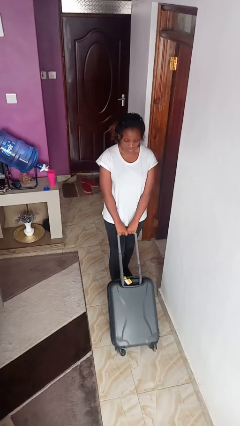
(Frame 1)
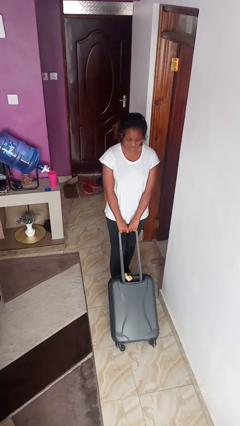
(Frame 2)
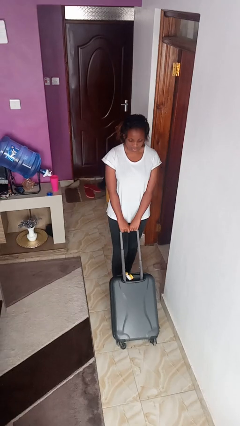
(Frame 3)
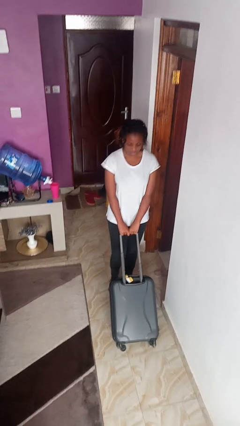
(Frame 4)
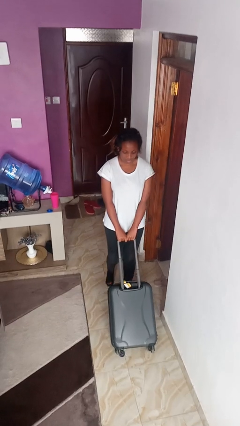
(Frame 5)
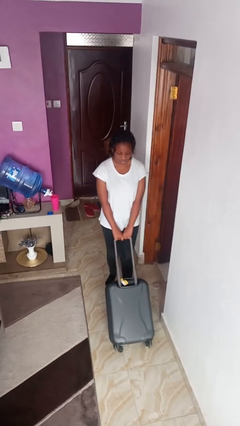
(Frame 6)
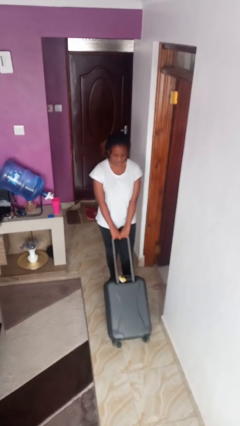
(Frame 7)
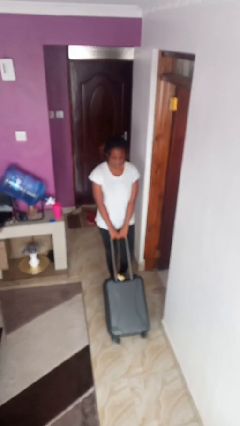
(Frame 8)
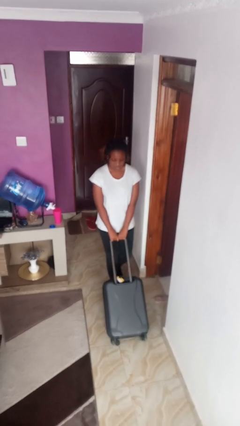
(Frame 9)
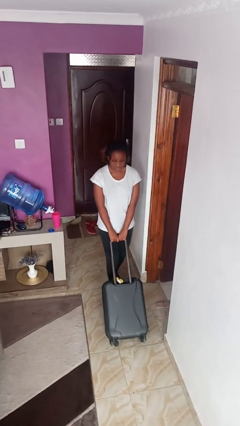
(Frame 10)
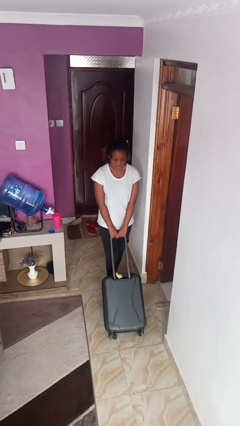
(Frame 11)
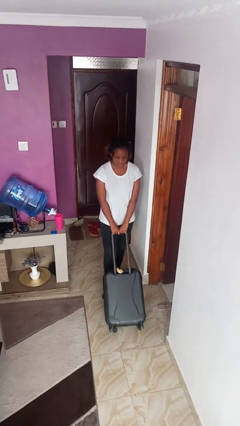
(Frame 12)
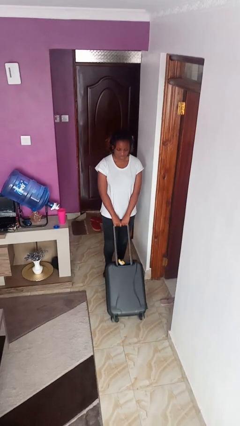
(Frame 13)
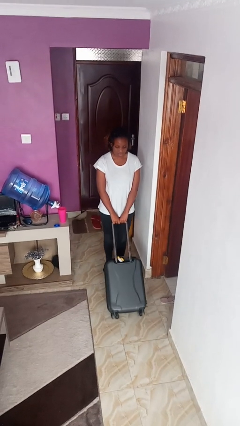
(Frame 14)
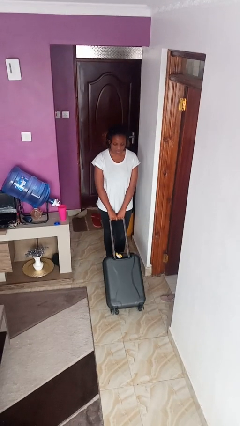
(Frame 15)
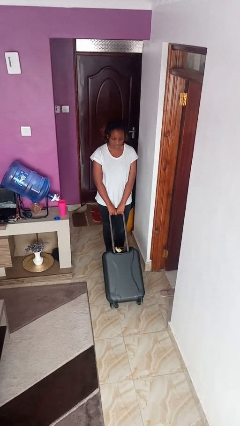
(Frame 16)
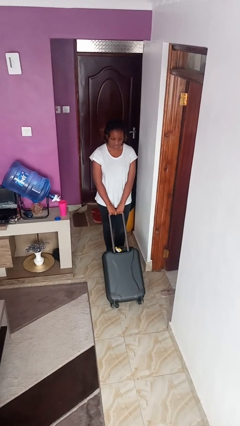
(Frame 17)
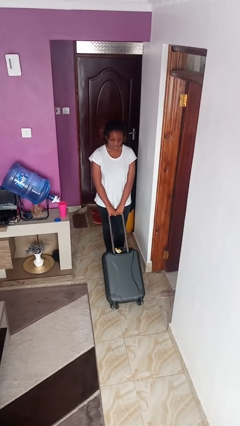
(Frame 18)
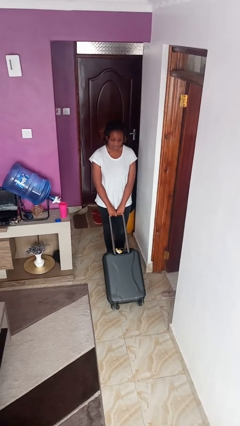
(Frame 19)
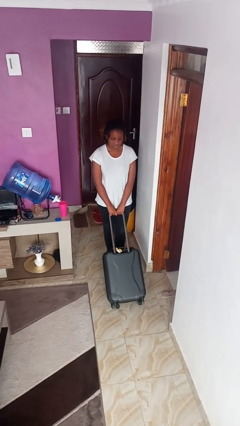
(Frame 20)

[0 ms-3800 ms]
person pulls wheeled cart

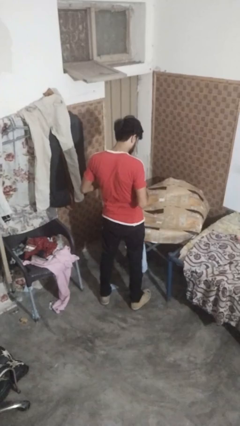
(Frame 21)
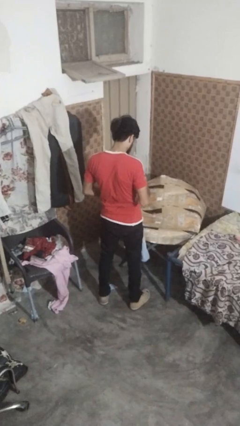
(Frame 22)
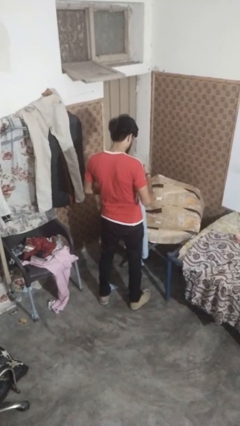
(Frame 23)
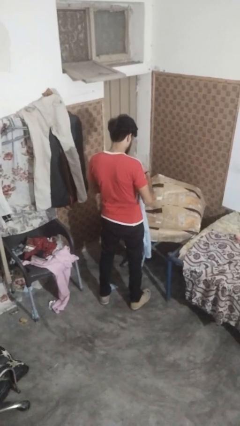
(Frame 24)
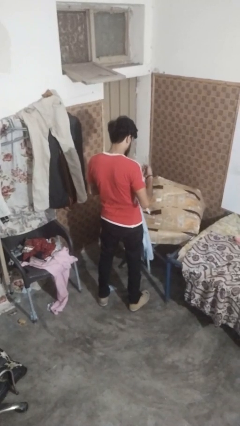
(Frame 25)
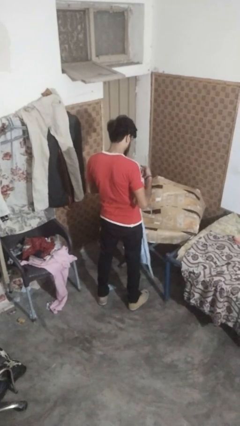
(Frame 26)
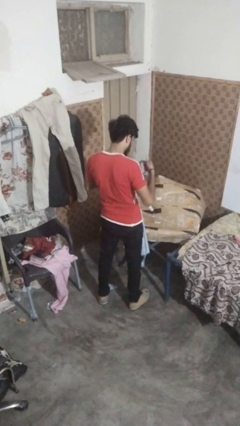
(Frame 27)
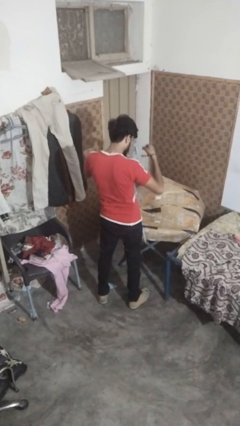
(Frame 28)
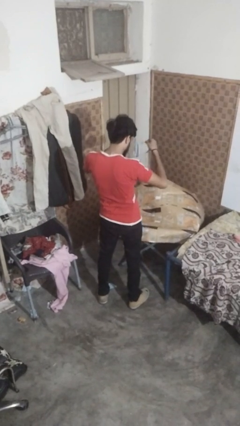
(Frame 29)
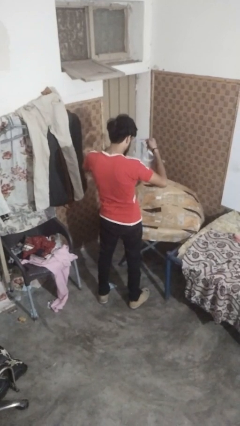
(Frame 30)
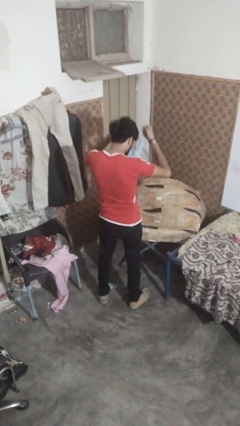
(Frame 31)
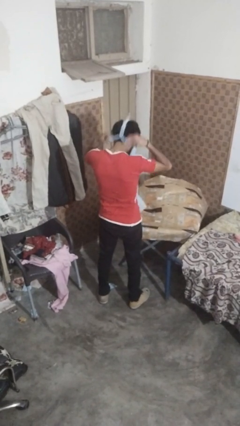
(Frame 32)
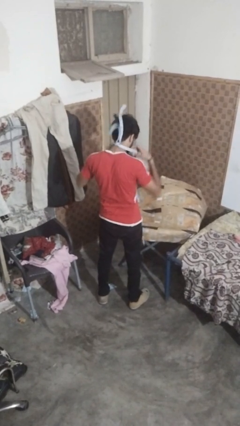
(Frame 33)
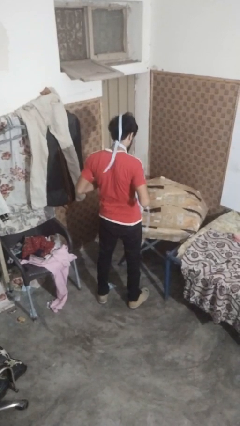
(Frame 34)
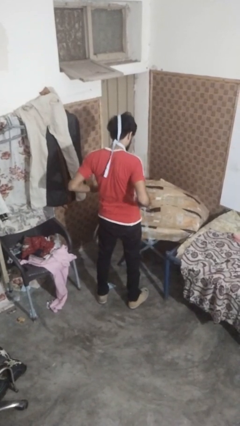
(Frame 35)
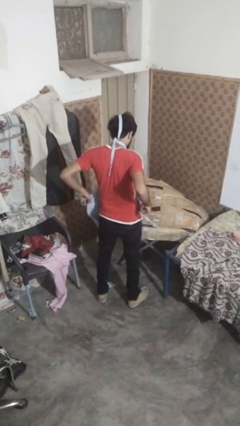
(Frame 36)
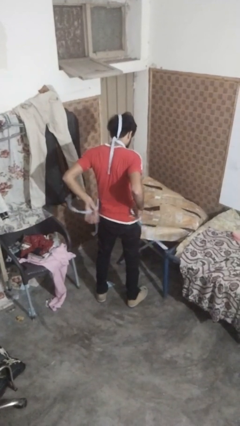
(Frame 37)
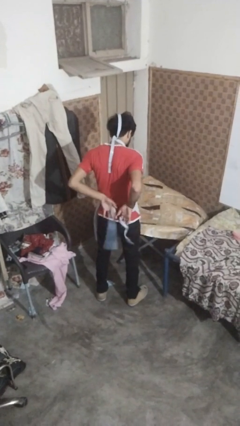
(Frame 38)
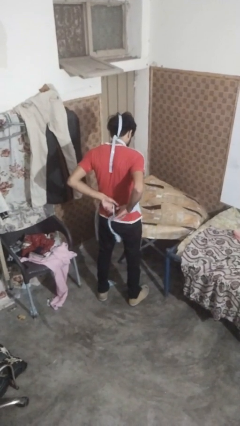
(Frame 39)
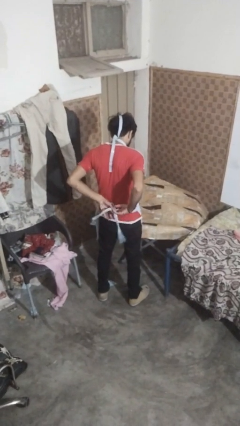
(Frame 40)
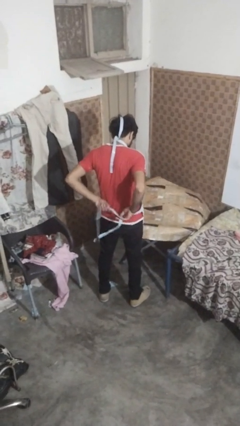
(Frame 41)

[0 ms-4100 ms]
person puts on apron

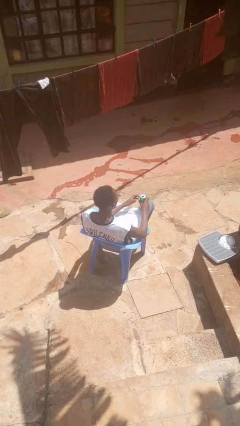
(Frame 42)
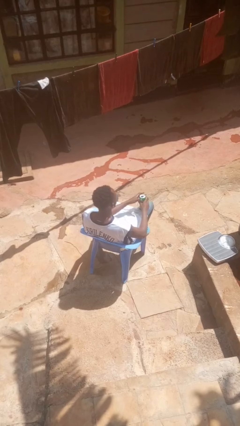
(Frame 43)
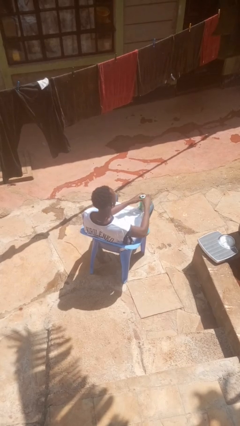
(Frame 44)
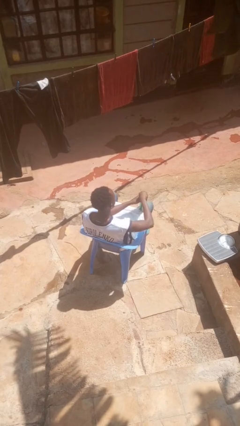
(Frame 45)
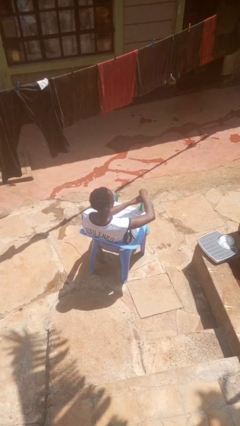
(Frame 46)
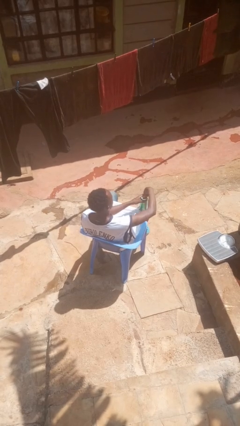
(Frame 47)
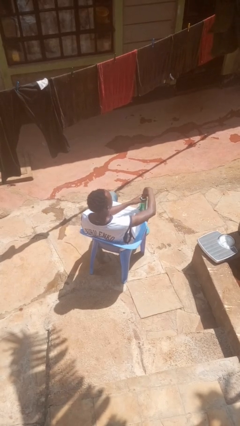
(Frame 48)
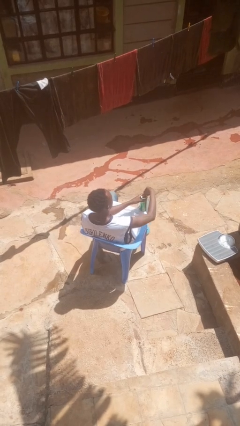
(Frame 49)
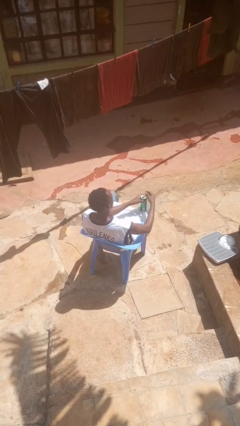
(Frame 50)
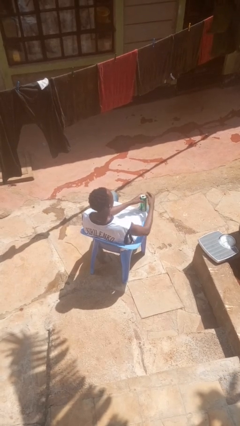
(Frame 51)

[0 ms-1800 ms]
person opens beverage can

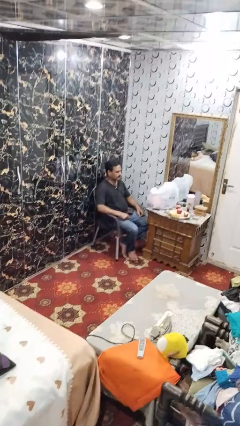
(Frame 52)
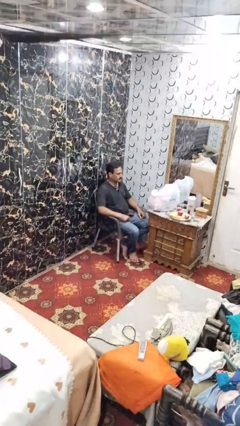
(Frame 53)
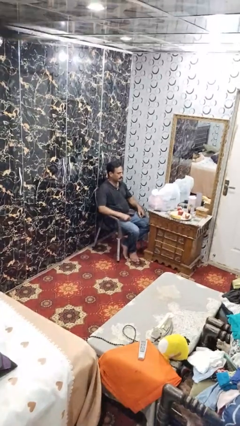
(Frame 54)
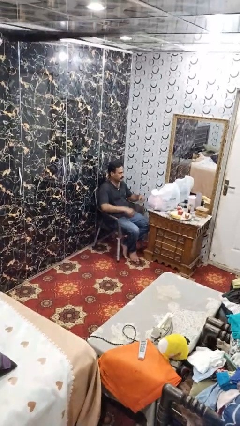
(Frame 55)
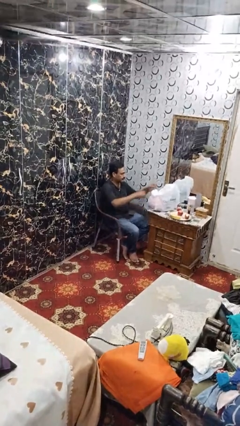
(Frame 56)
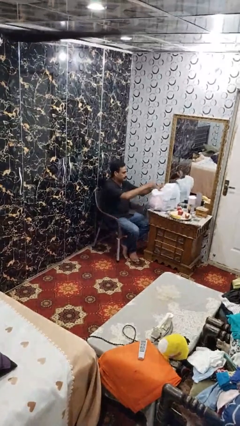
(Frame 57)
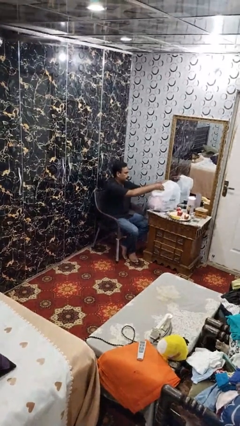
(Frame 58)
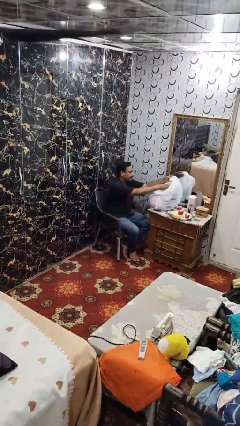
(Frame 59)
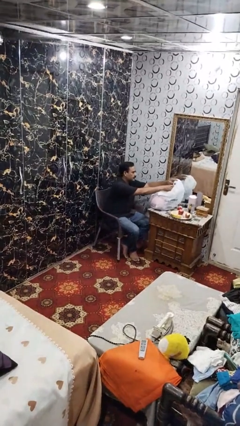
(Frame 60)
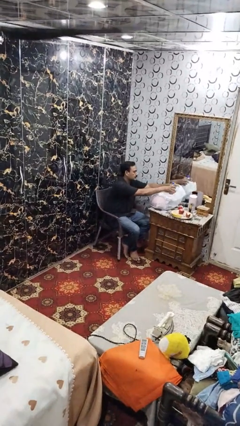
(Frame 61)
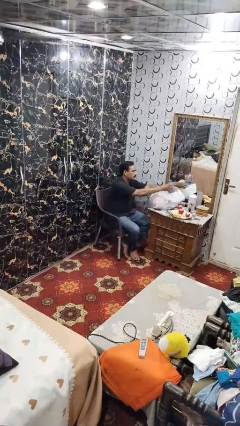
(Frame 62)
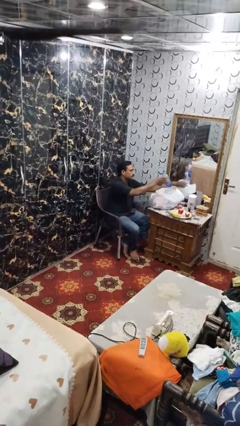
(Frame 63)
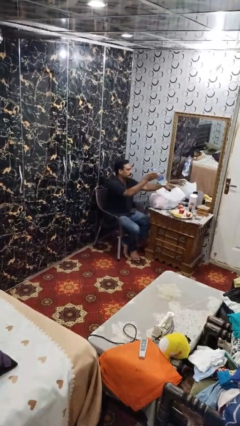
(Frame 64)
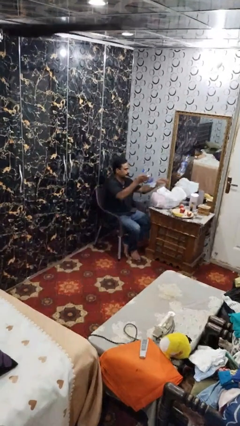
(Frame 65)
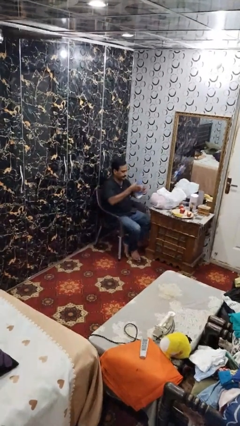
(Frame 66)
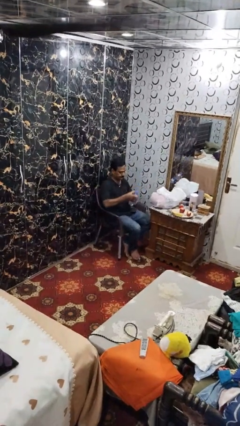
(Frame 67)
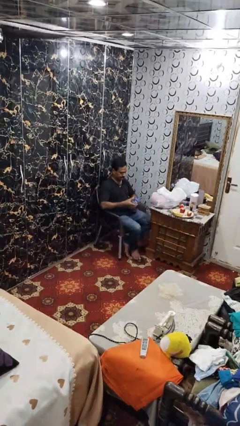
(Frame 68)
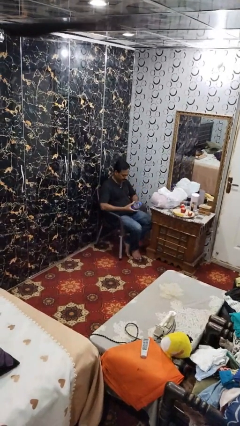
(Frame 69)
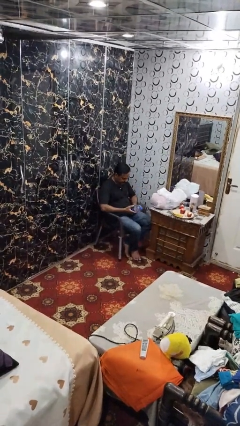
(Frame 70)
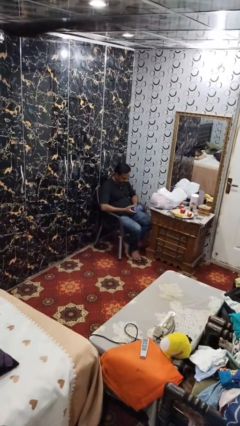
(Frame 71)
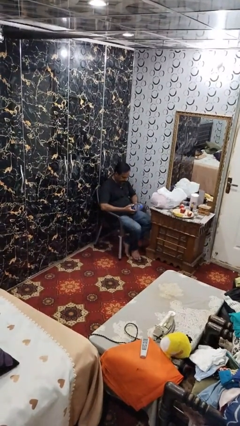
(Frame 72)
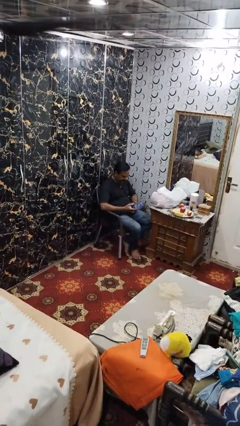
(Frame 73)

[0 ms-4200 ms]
person takes object from bag

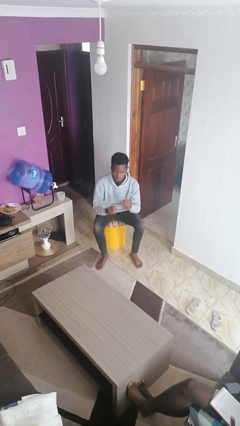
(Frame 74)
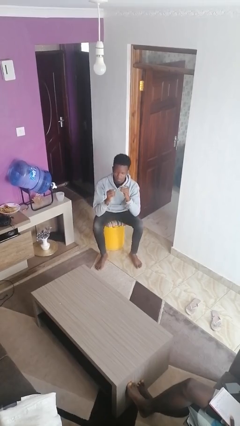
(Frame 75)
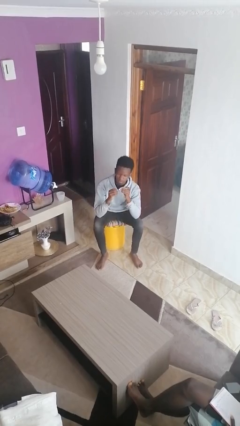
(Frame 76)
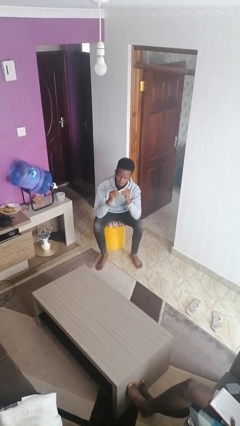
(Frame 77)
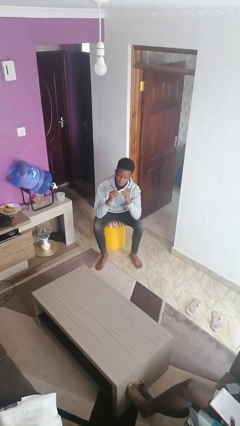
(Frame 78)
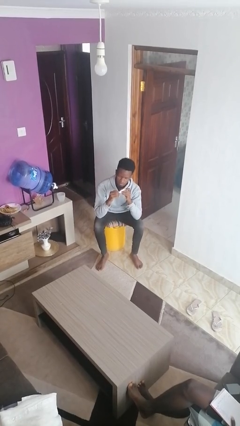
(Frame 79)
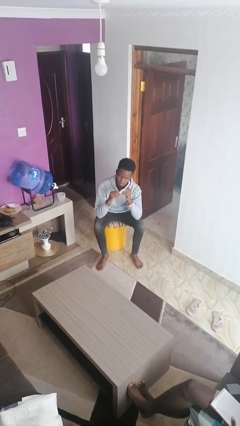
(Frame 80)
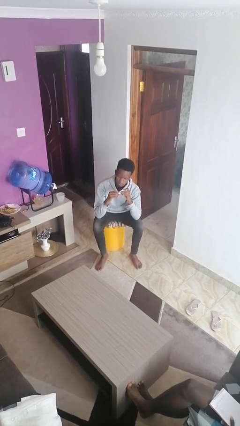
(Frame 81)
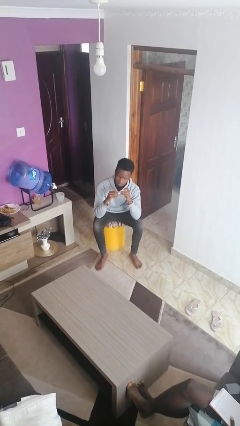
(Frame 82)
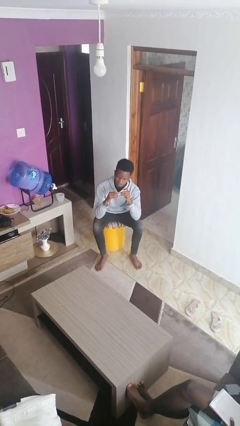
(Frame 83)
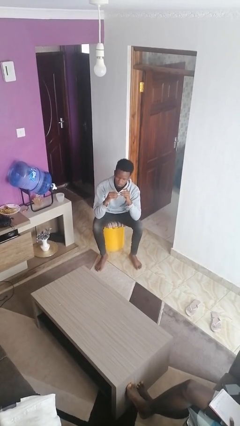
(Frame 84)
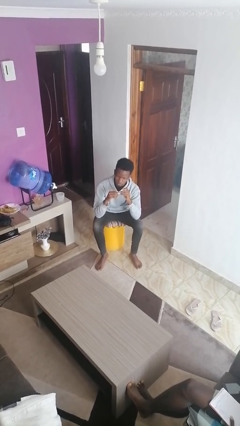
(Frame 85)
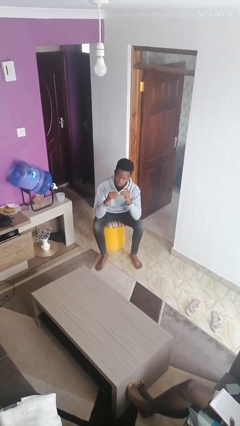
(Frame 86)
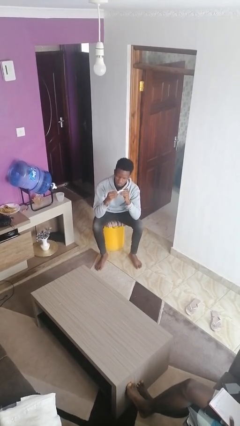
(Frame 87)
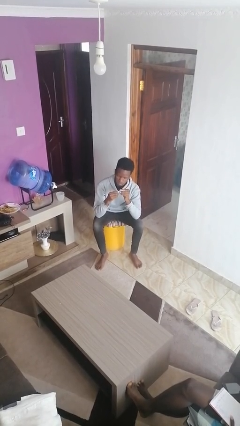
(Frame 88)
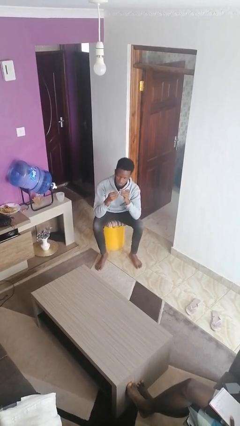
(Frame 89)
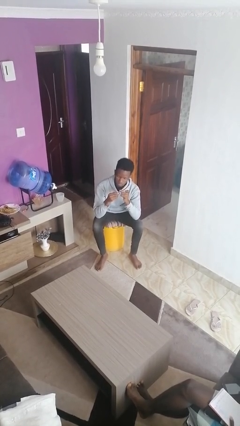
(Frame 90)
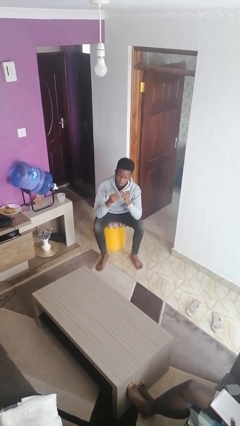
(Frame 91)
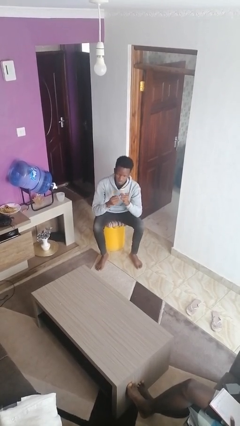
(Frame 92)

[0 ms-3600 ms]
person clips fingernails
